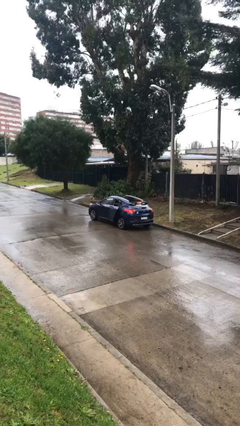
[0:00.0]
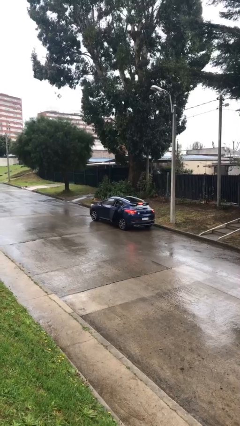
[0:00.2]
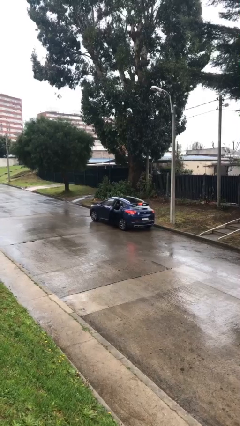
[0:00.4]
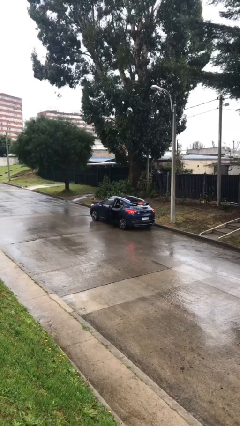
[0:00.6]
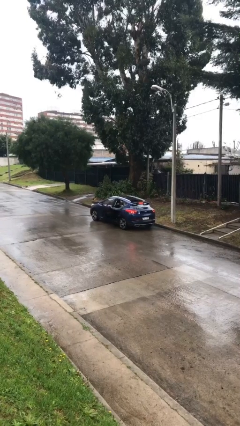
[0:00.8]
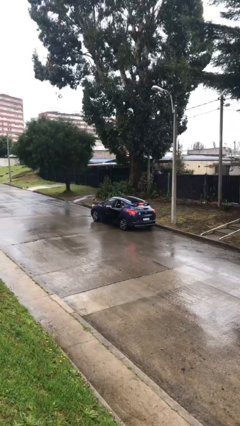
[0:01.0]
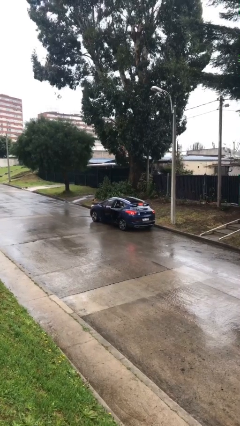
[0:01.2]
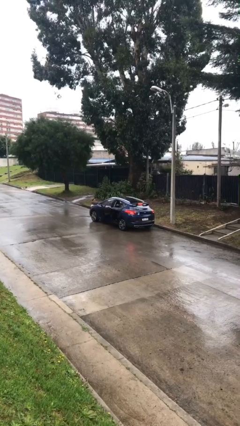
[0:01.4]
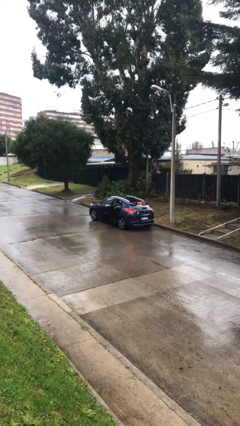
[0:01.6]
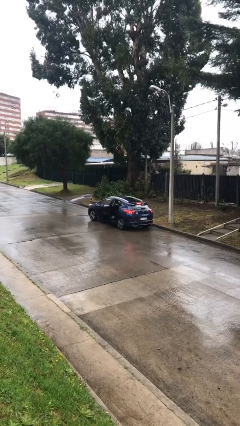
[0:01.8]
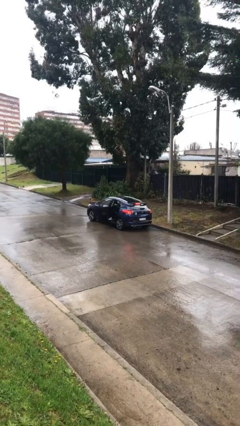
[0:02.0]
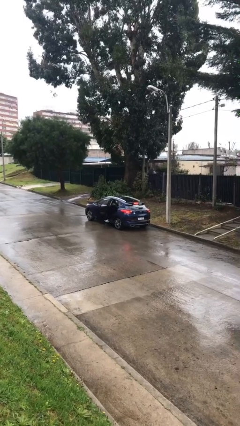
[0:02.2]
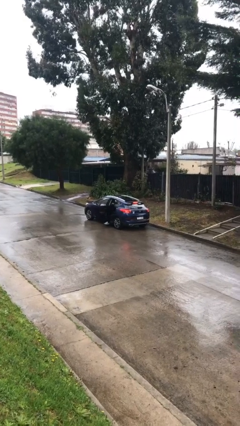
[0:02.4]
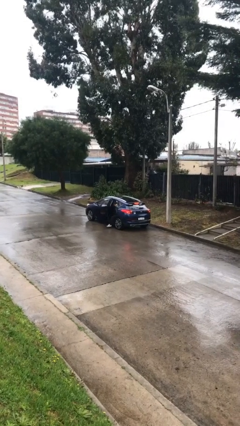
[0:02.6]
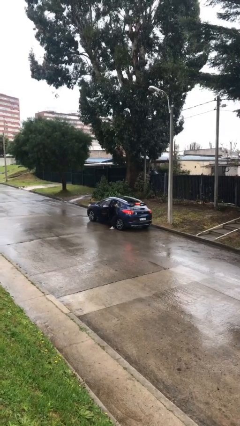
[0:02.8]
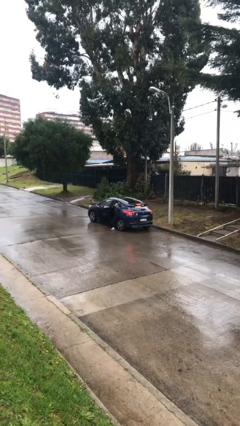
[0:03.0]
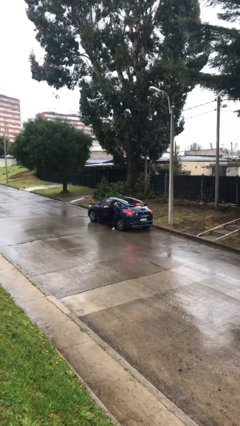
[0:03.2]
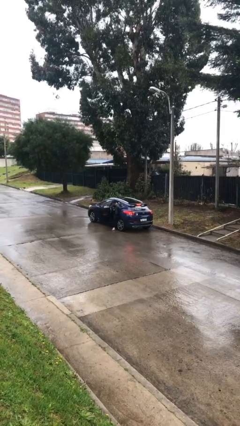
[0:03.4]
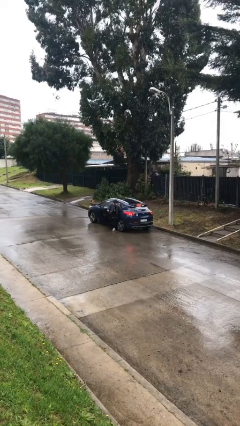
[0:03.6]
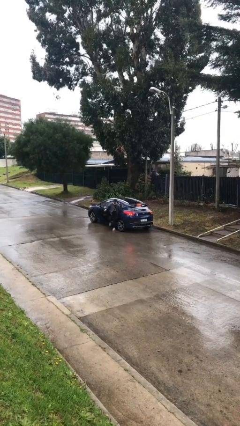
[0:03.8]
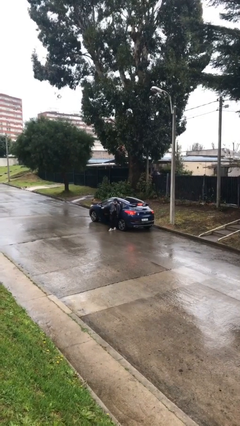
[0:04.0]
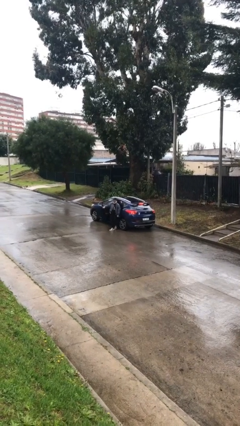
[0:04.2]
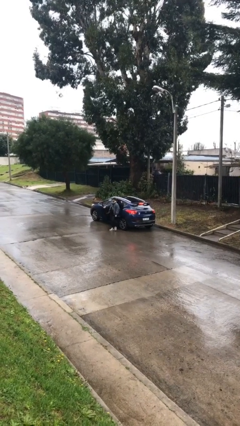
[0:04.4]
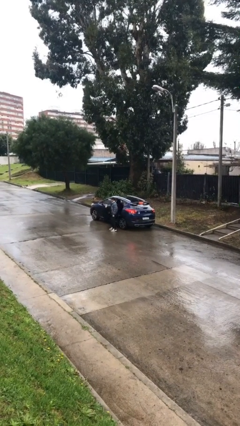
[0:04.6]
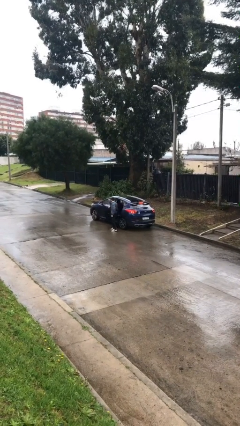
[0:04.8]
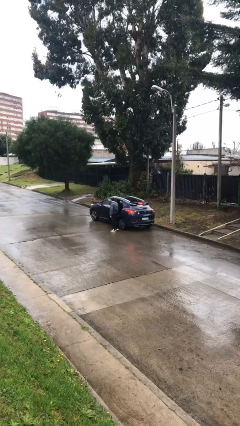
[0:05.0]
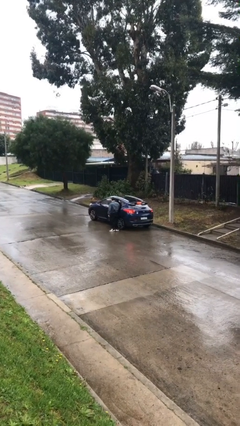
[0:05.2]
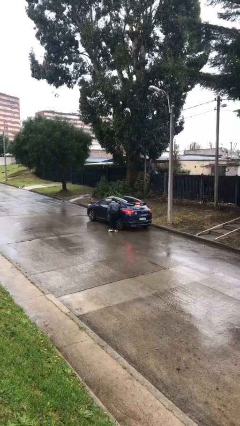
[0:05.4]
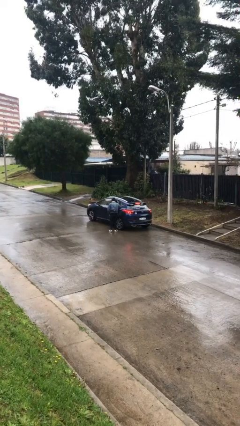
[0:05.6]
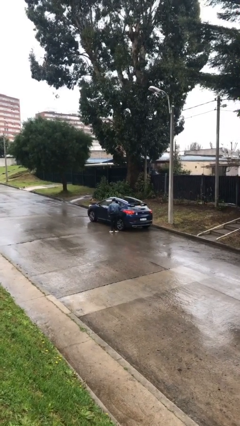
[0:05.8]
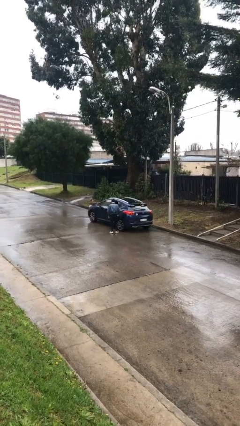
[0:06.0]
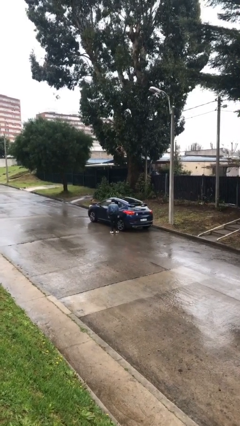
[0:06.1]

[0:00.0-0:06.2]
car drops off person

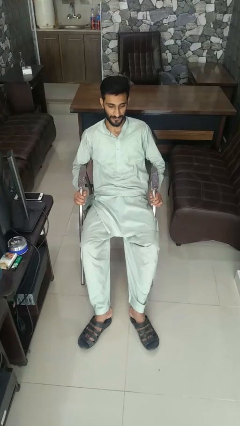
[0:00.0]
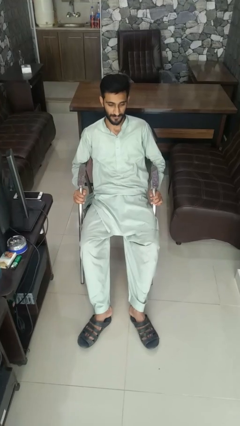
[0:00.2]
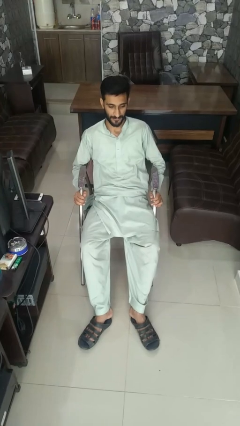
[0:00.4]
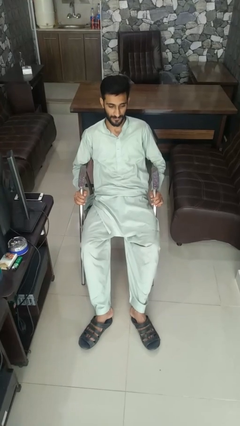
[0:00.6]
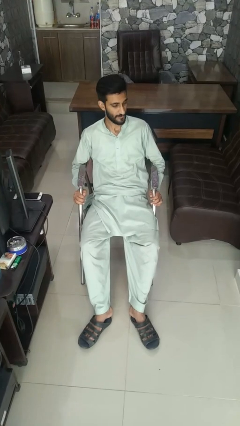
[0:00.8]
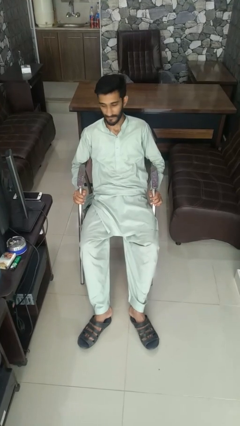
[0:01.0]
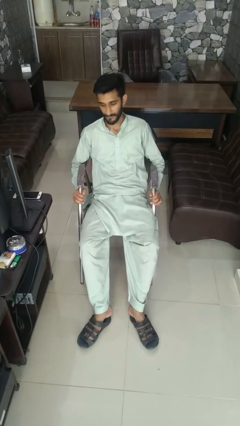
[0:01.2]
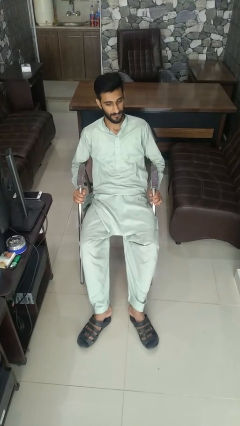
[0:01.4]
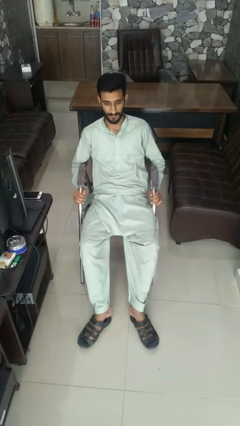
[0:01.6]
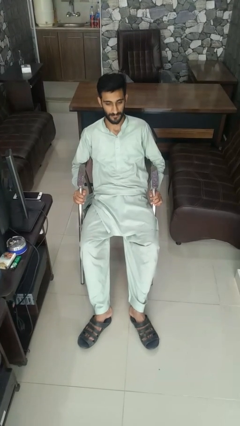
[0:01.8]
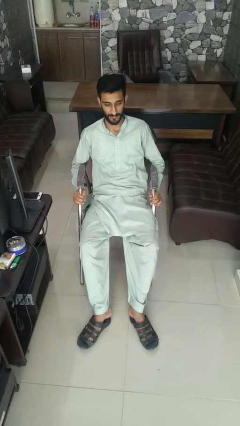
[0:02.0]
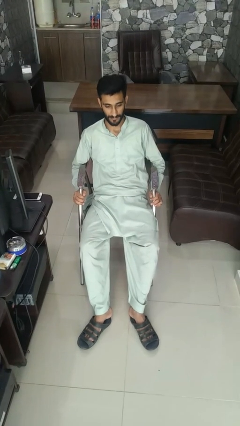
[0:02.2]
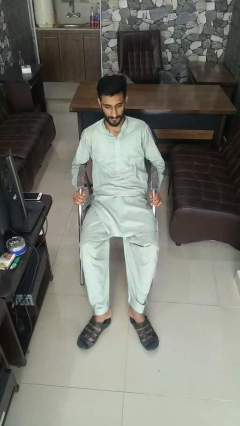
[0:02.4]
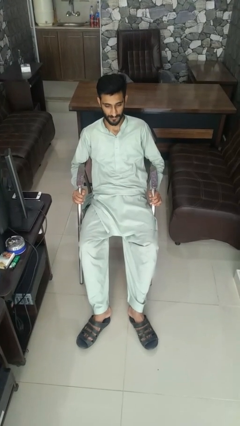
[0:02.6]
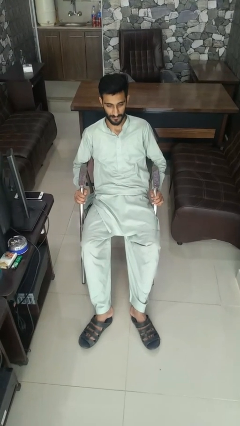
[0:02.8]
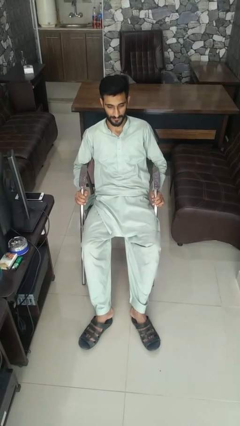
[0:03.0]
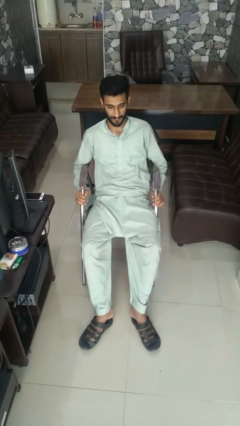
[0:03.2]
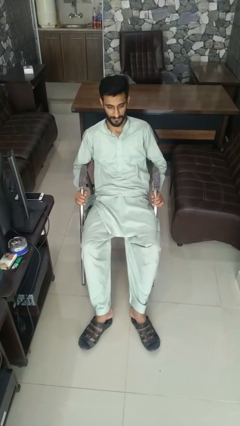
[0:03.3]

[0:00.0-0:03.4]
person shakes head

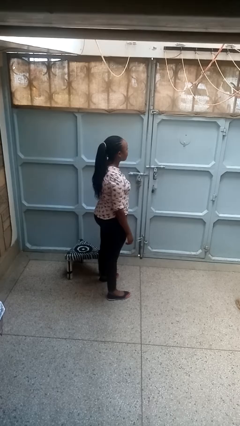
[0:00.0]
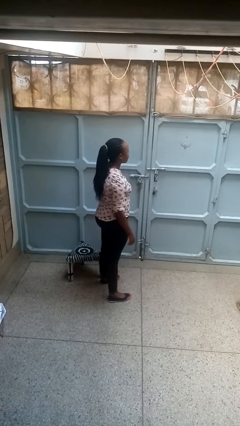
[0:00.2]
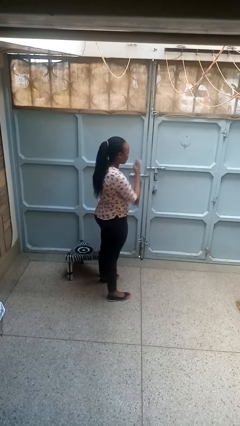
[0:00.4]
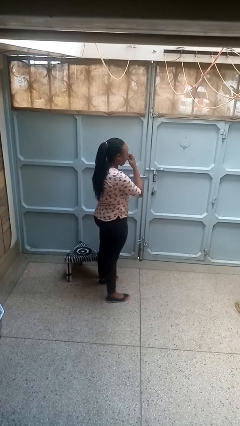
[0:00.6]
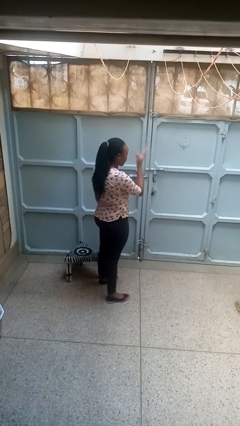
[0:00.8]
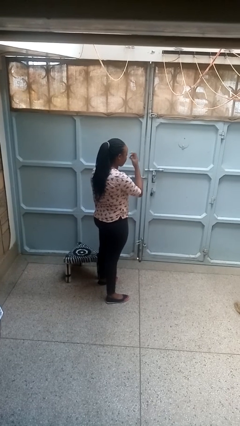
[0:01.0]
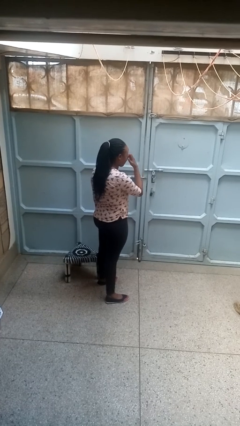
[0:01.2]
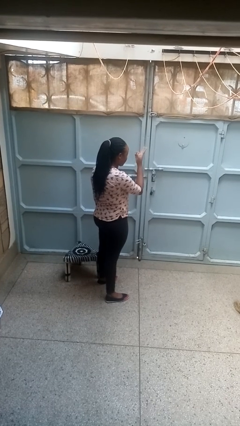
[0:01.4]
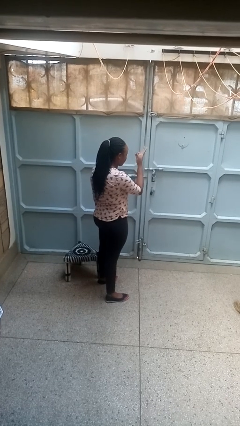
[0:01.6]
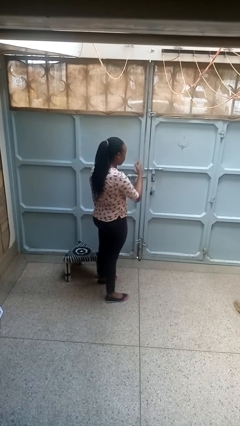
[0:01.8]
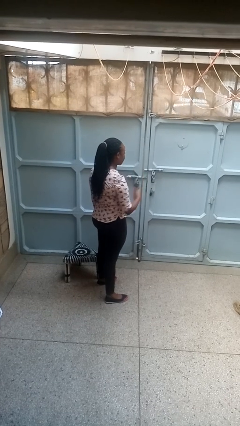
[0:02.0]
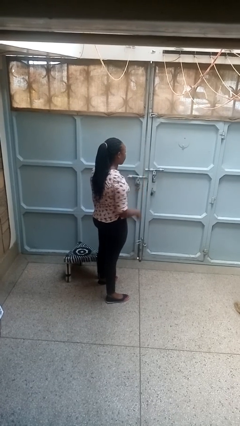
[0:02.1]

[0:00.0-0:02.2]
person gestures watch closely

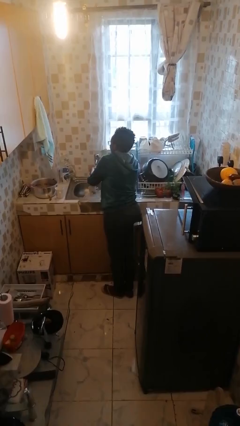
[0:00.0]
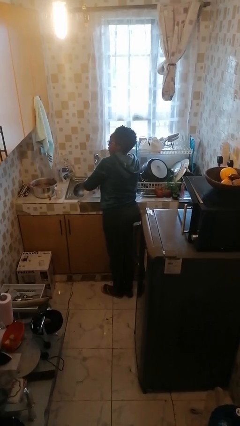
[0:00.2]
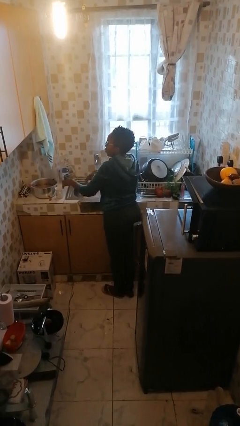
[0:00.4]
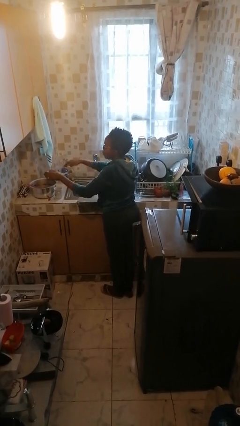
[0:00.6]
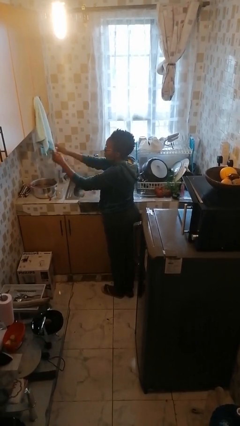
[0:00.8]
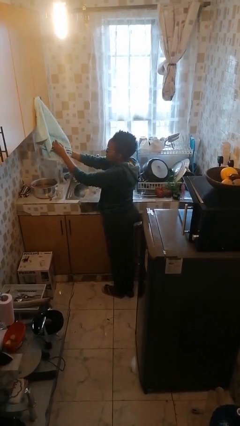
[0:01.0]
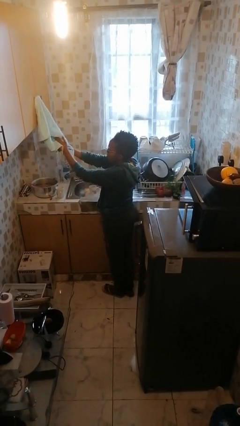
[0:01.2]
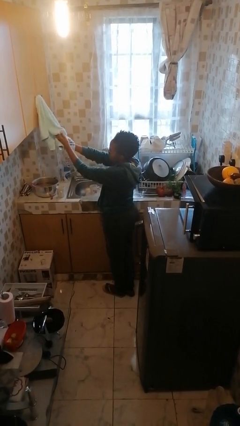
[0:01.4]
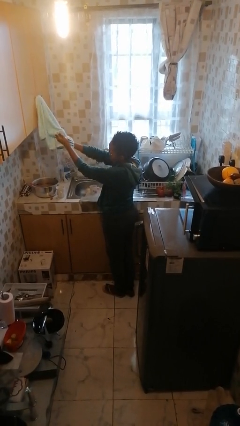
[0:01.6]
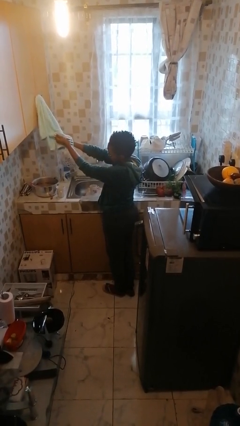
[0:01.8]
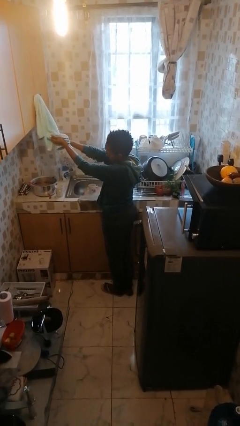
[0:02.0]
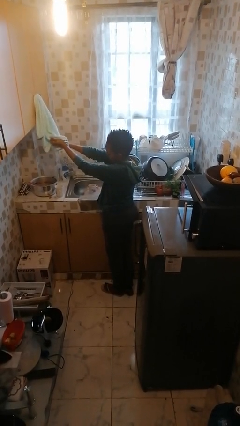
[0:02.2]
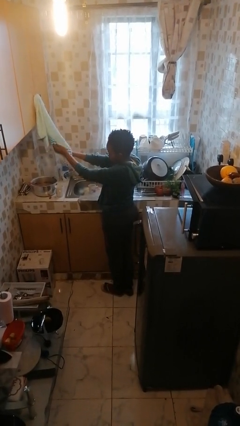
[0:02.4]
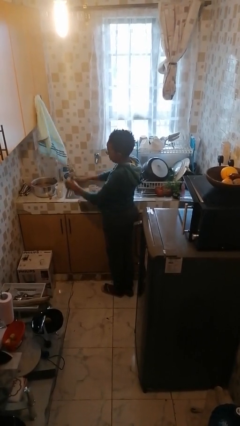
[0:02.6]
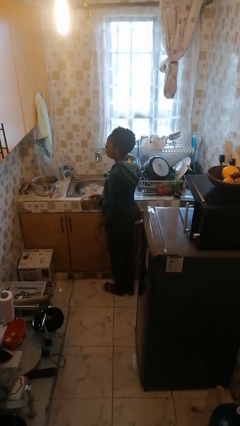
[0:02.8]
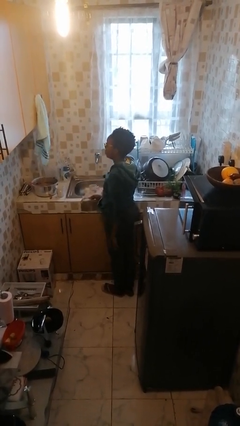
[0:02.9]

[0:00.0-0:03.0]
person dries hands with towel

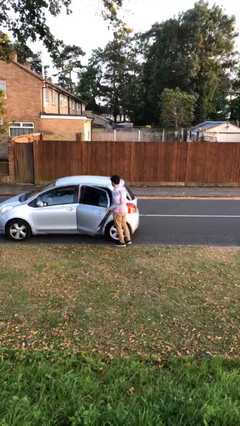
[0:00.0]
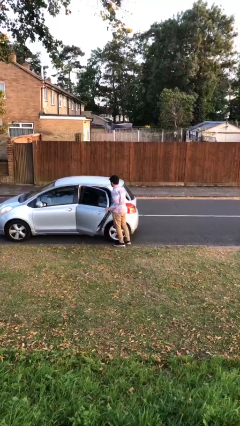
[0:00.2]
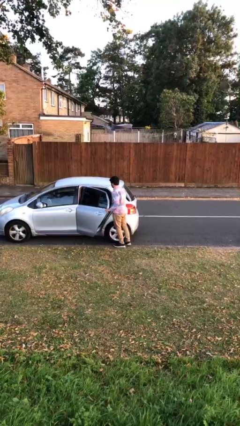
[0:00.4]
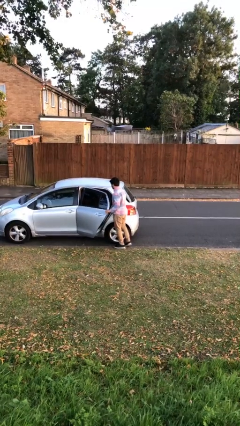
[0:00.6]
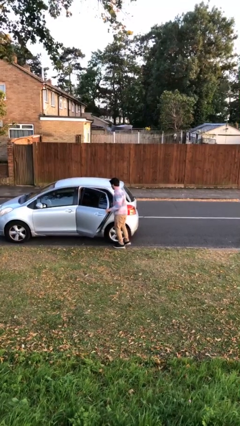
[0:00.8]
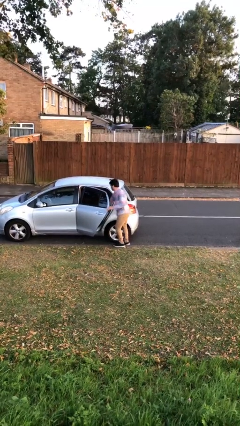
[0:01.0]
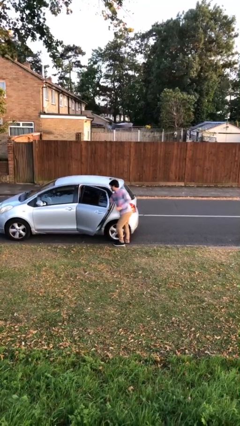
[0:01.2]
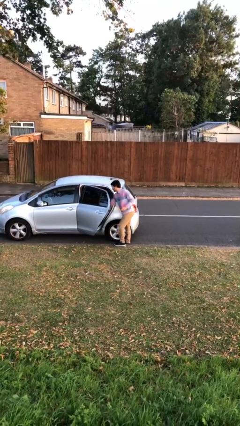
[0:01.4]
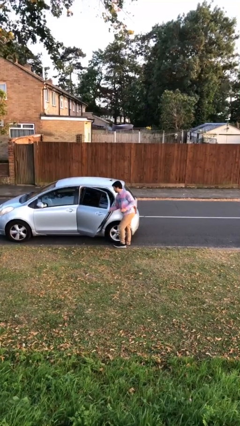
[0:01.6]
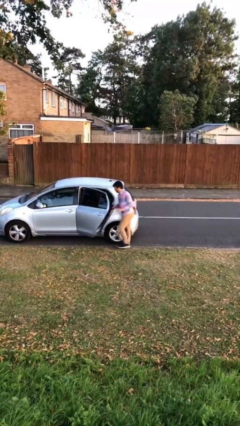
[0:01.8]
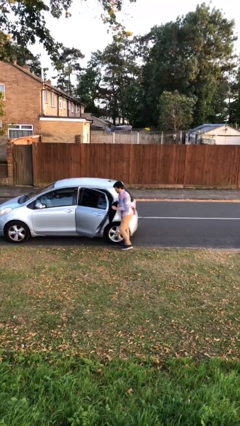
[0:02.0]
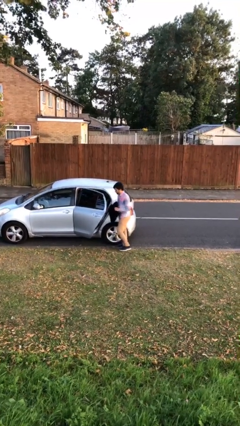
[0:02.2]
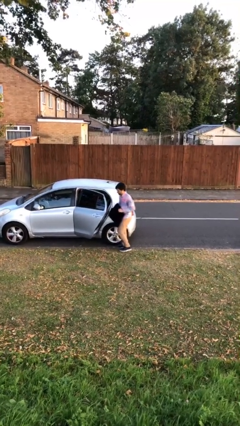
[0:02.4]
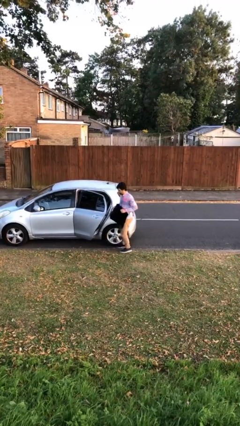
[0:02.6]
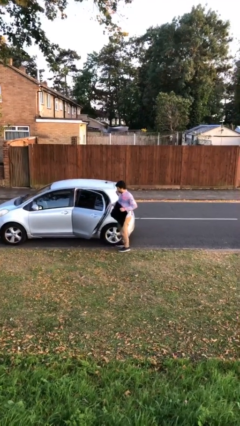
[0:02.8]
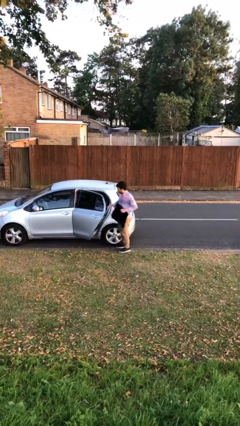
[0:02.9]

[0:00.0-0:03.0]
person unloads car
